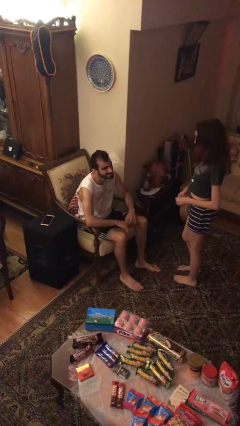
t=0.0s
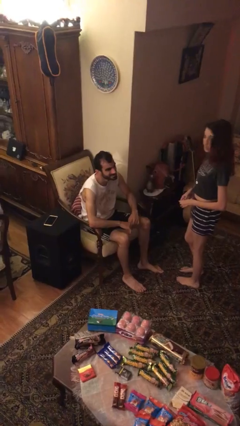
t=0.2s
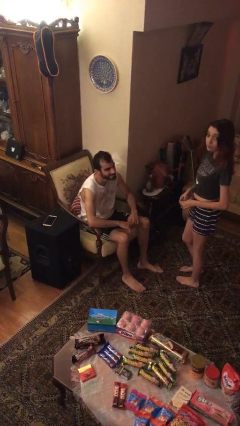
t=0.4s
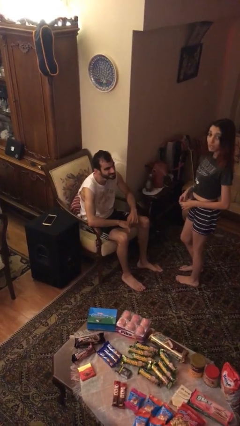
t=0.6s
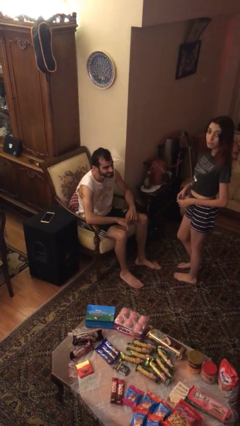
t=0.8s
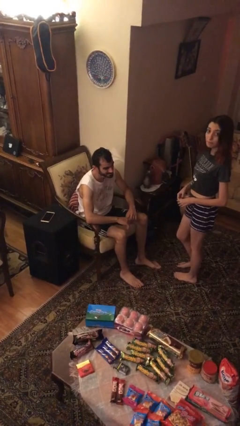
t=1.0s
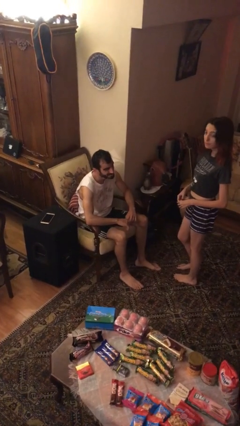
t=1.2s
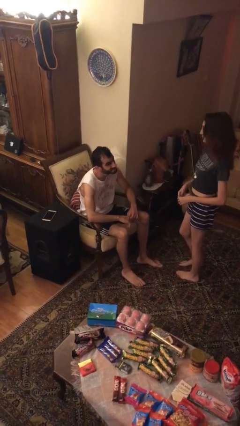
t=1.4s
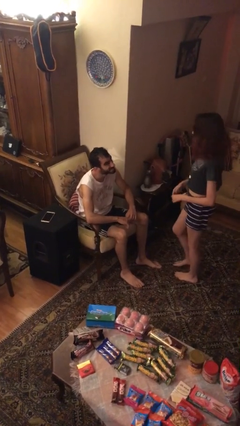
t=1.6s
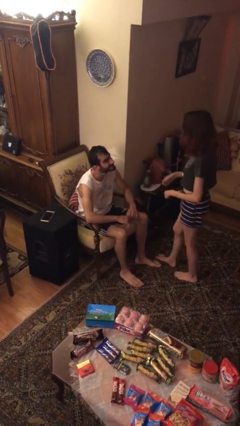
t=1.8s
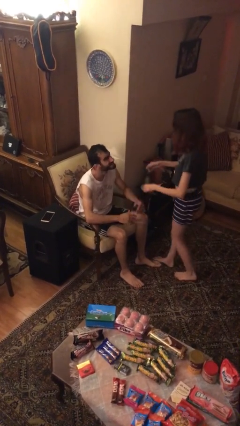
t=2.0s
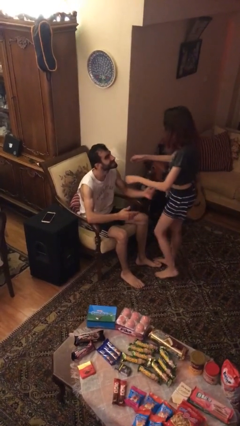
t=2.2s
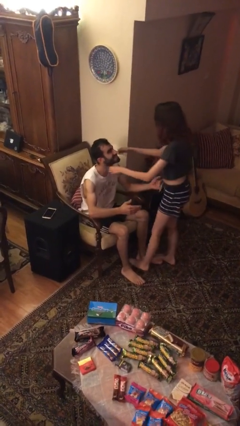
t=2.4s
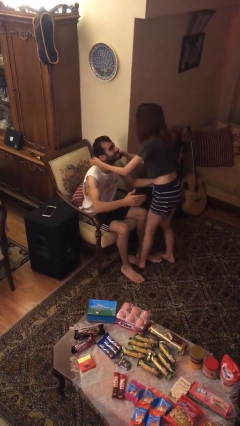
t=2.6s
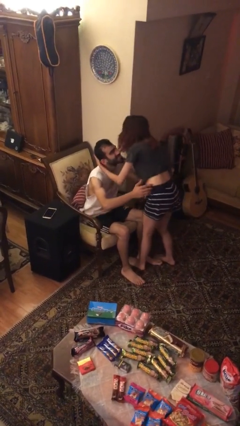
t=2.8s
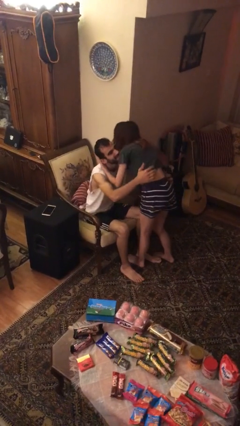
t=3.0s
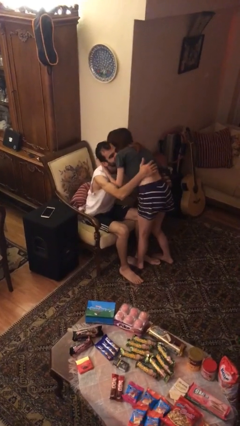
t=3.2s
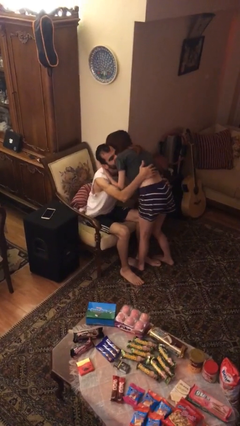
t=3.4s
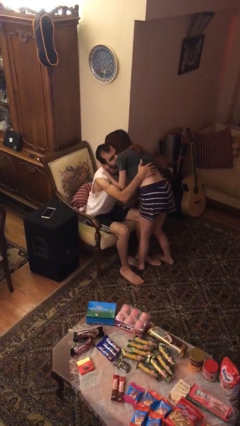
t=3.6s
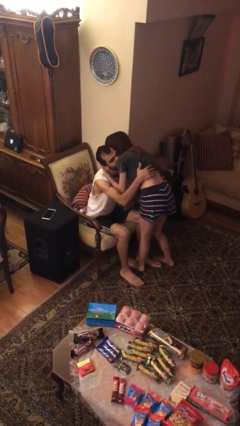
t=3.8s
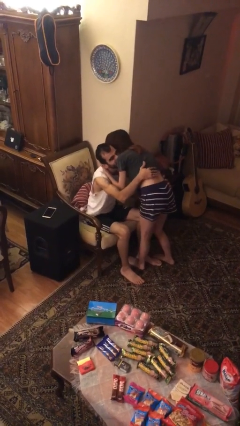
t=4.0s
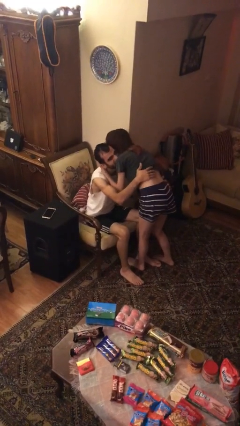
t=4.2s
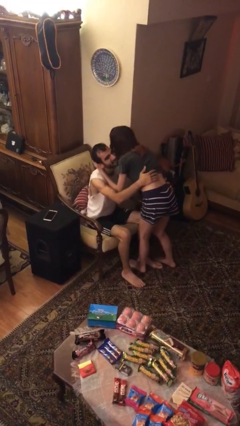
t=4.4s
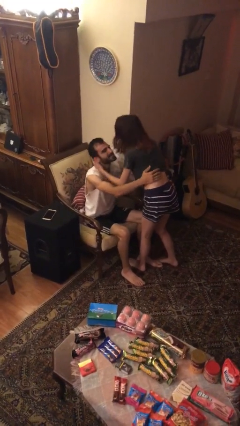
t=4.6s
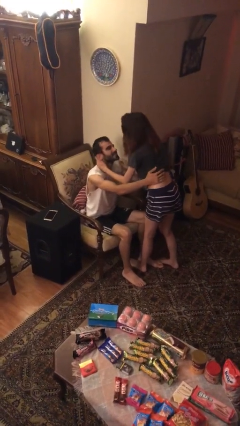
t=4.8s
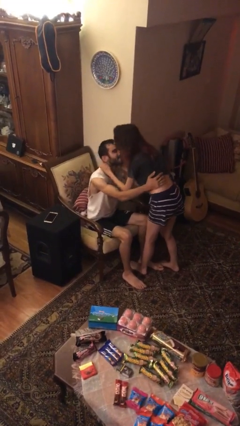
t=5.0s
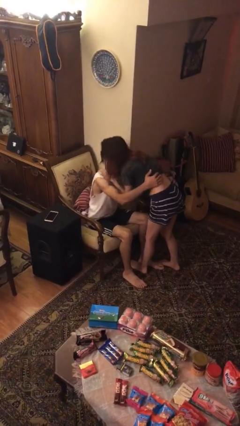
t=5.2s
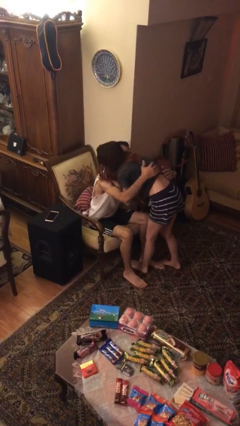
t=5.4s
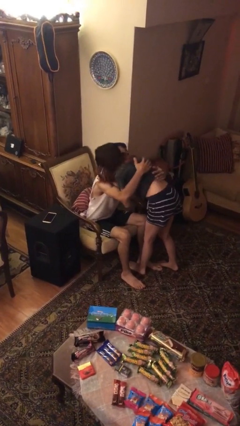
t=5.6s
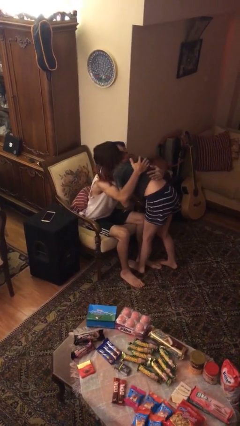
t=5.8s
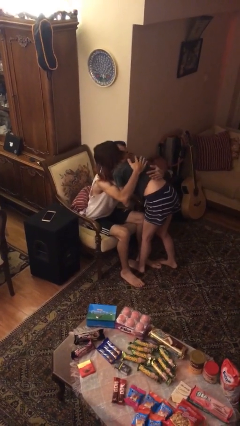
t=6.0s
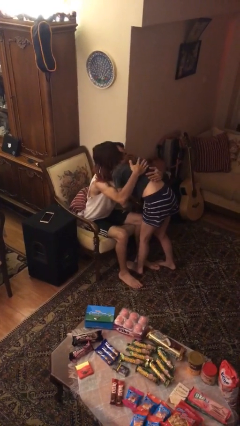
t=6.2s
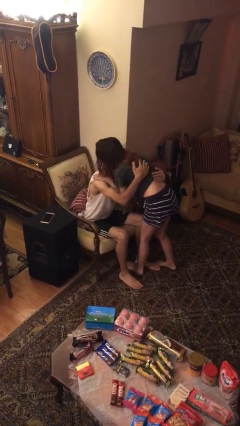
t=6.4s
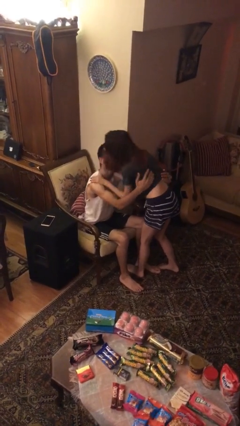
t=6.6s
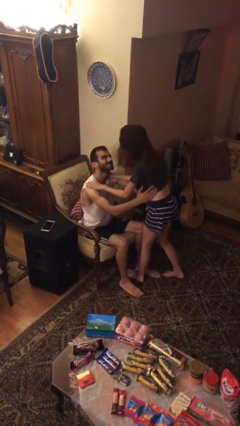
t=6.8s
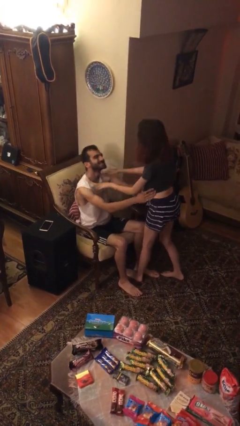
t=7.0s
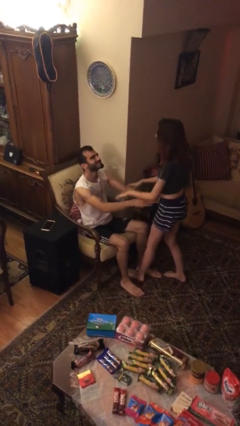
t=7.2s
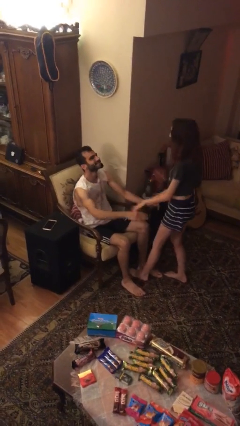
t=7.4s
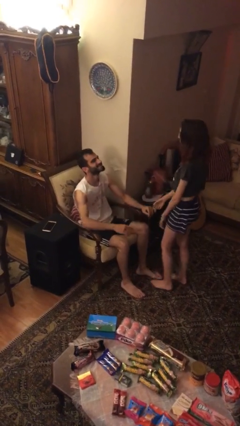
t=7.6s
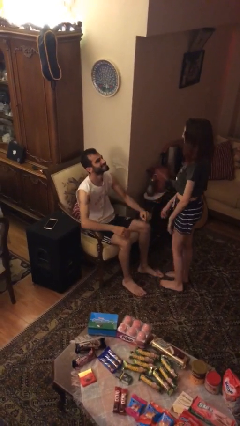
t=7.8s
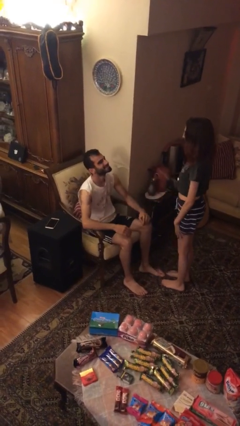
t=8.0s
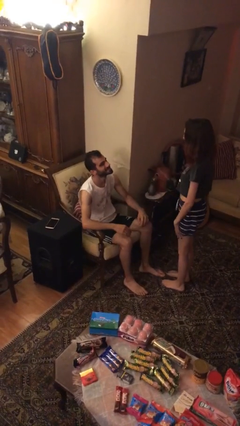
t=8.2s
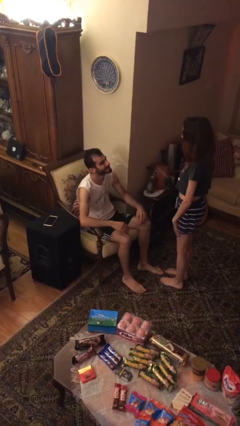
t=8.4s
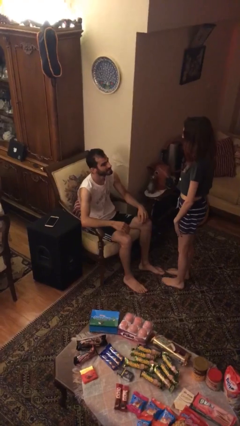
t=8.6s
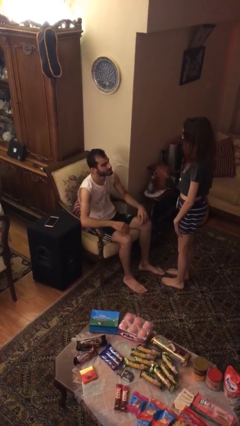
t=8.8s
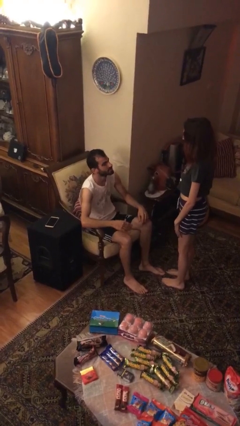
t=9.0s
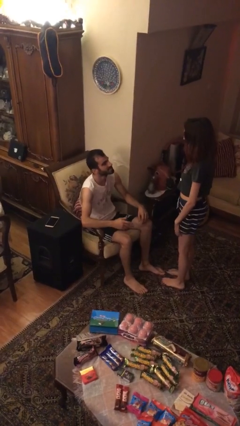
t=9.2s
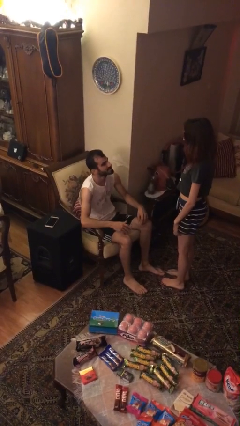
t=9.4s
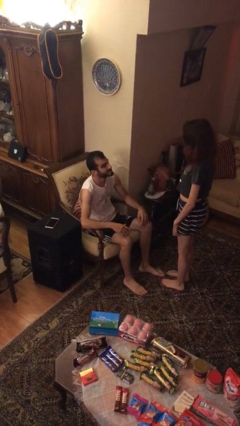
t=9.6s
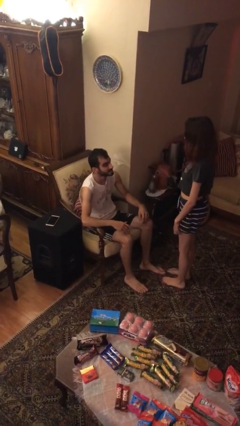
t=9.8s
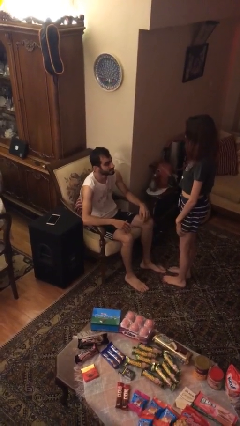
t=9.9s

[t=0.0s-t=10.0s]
person embraces person

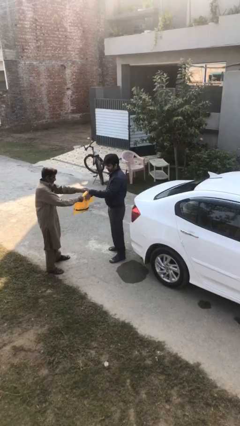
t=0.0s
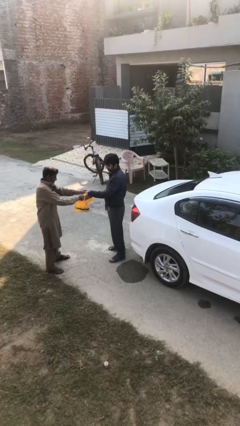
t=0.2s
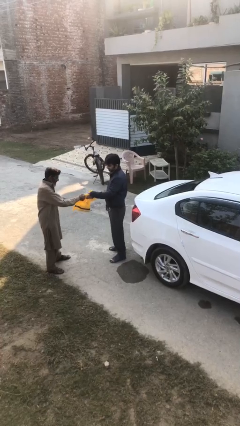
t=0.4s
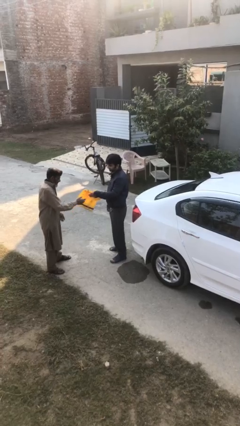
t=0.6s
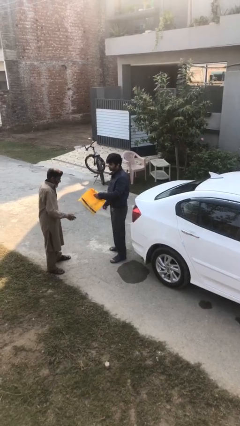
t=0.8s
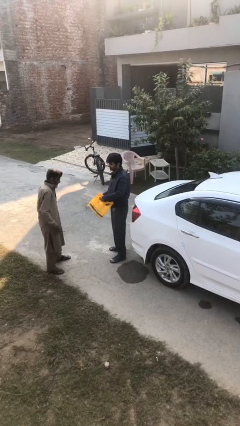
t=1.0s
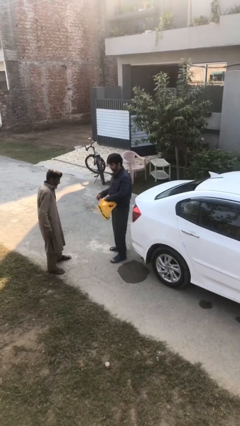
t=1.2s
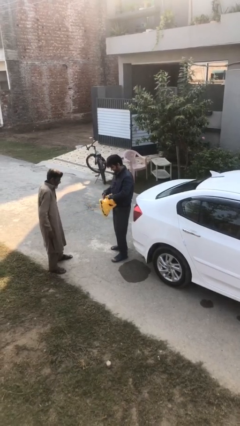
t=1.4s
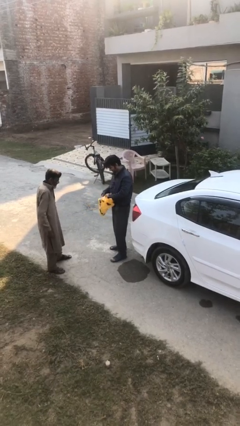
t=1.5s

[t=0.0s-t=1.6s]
person transfers object to person

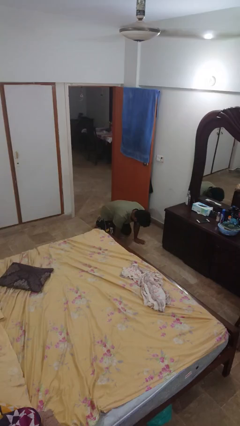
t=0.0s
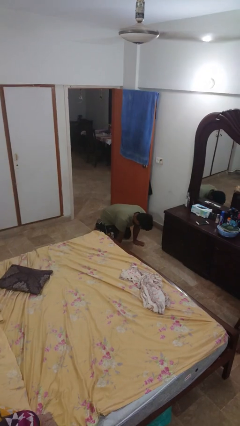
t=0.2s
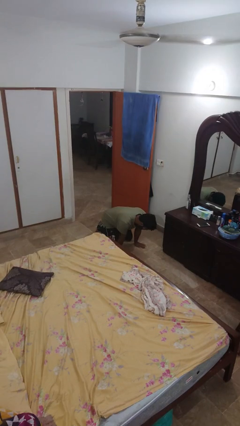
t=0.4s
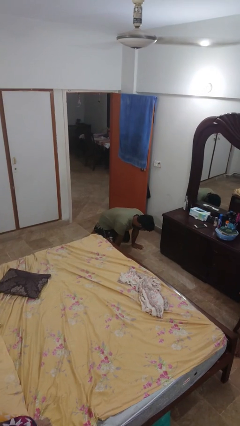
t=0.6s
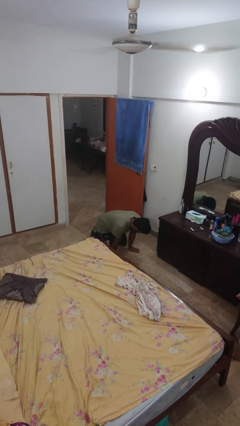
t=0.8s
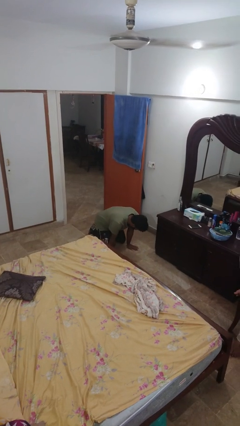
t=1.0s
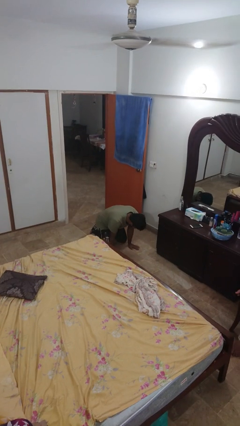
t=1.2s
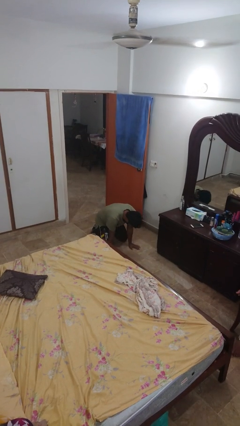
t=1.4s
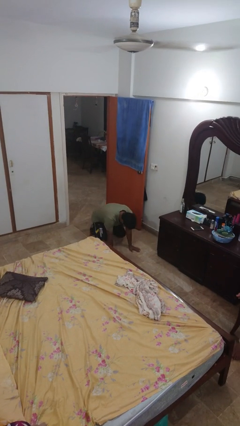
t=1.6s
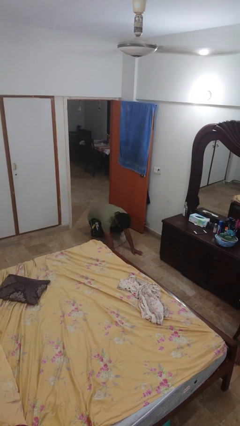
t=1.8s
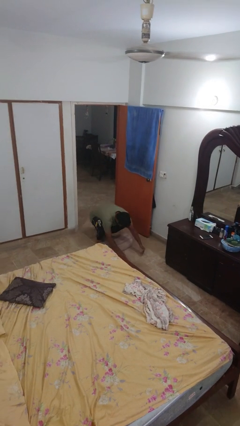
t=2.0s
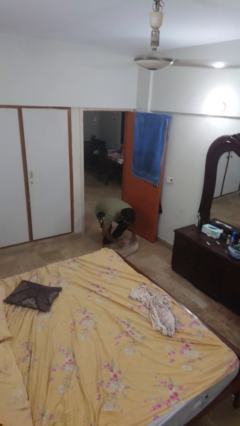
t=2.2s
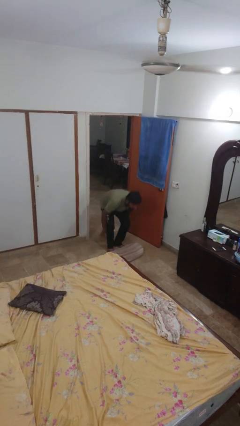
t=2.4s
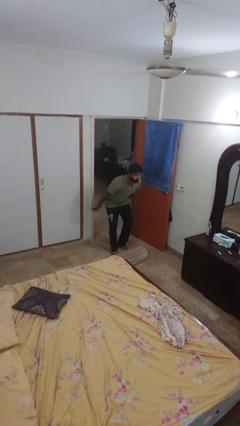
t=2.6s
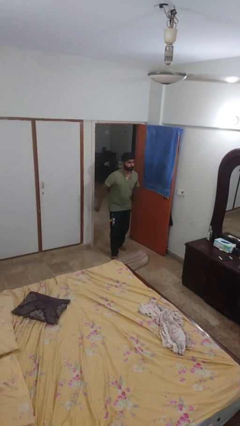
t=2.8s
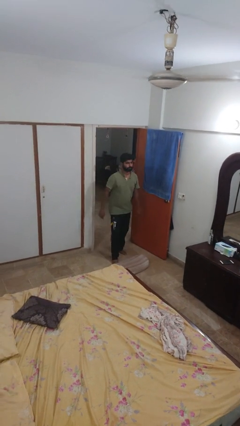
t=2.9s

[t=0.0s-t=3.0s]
person stands up from floor

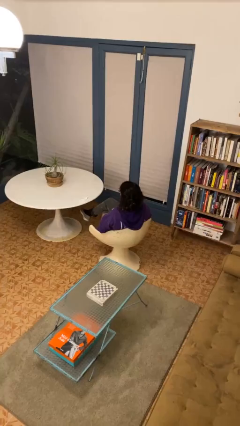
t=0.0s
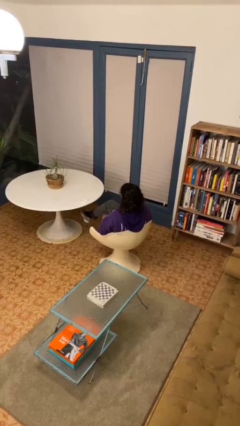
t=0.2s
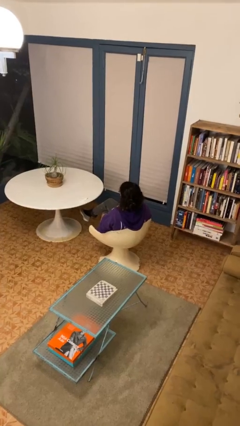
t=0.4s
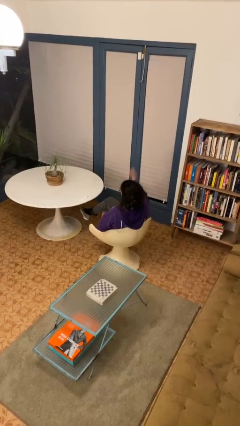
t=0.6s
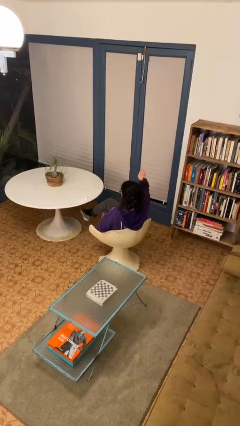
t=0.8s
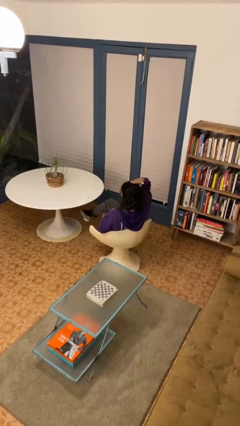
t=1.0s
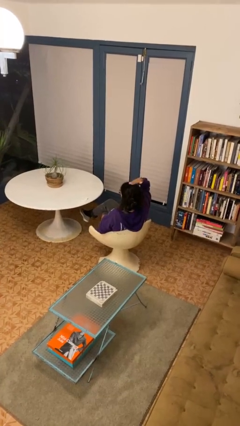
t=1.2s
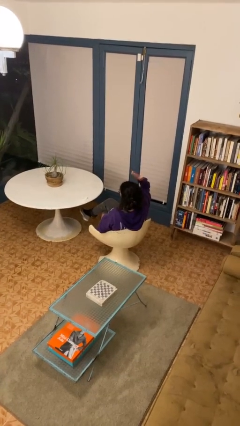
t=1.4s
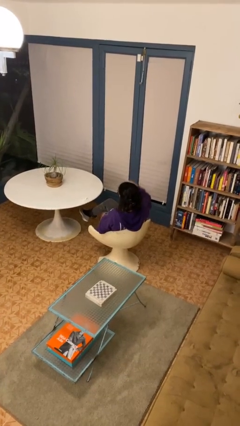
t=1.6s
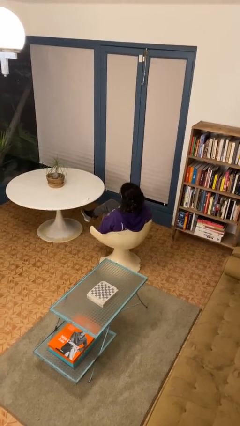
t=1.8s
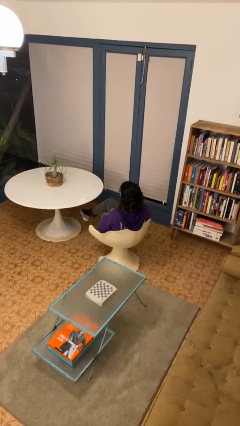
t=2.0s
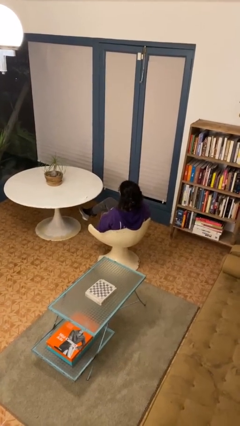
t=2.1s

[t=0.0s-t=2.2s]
person pats head

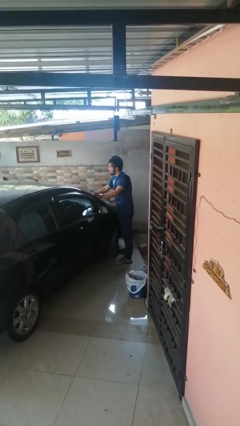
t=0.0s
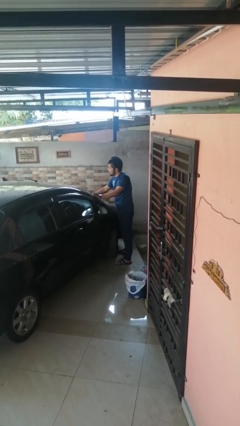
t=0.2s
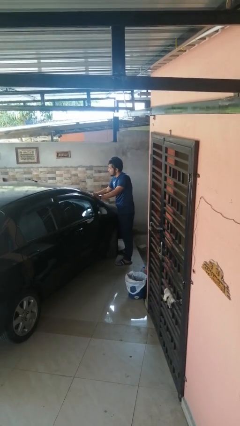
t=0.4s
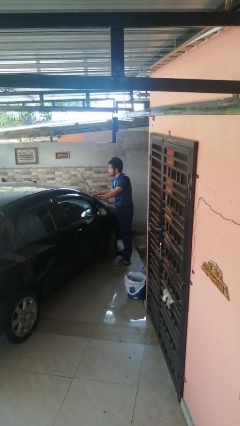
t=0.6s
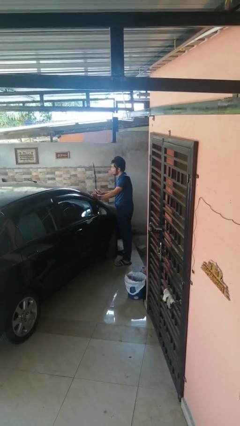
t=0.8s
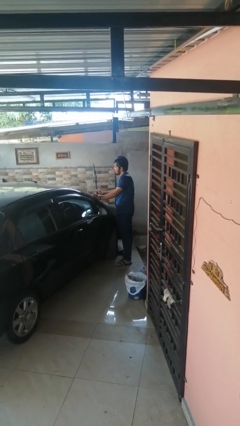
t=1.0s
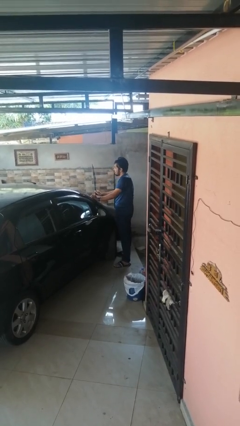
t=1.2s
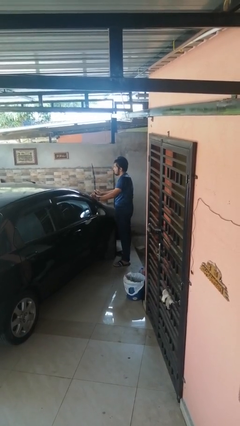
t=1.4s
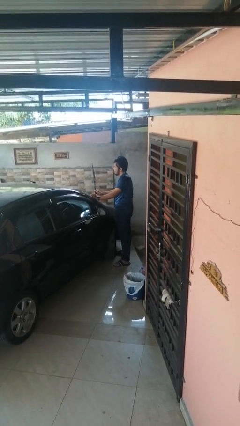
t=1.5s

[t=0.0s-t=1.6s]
person flips up car wipers
